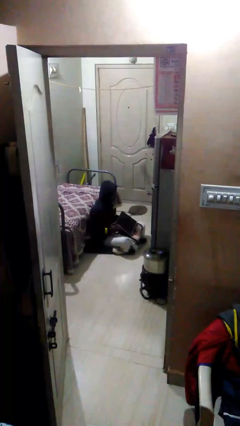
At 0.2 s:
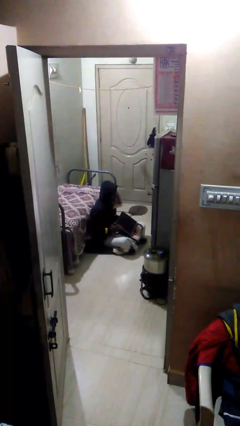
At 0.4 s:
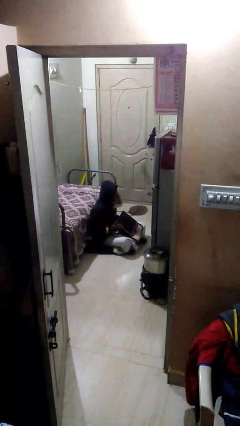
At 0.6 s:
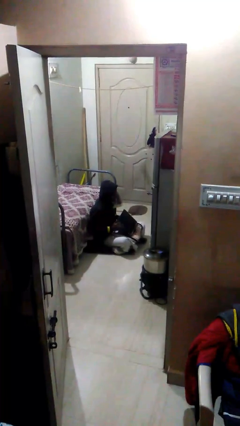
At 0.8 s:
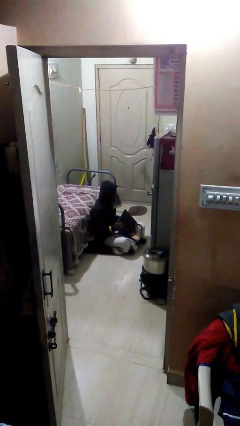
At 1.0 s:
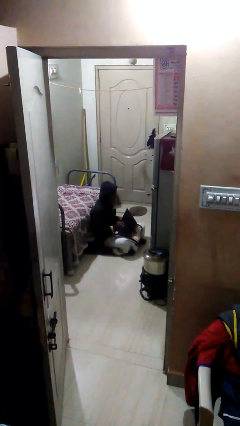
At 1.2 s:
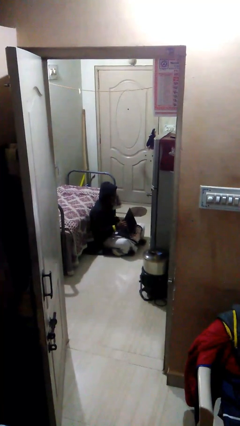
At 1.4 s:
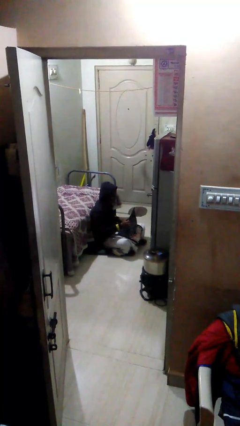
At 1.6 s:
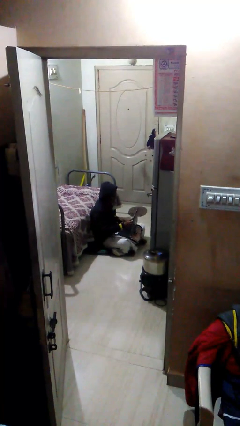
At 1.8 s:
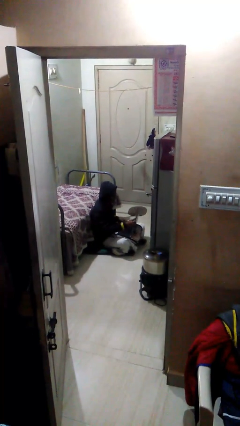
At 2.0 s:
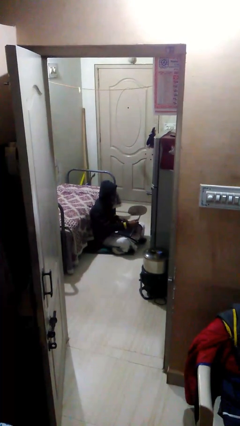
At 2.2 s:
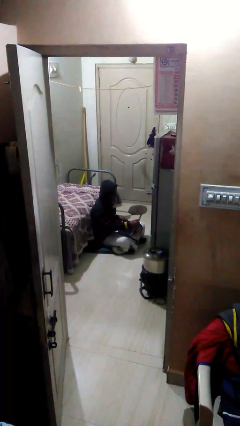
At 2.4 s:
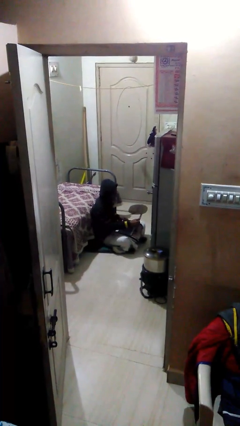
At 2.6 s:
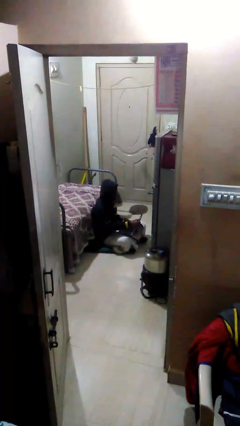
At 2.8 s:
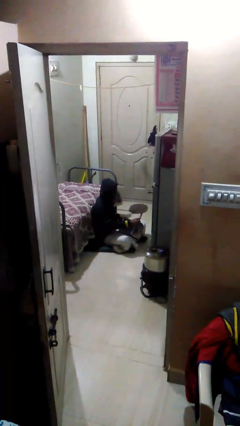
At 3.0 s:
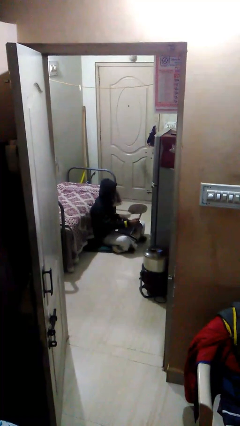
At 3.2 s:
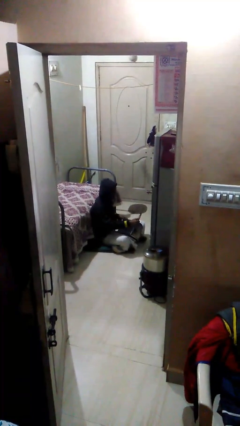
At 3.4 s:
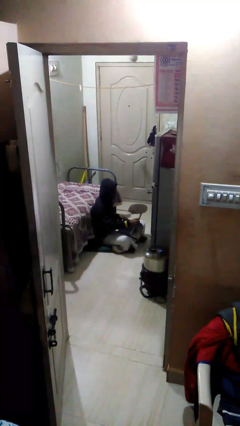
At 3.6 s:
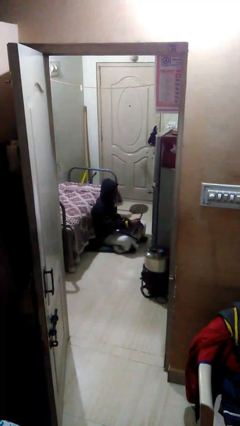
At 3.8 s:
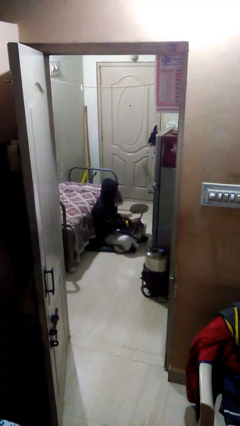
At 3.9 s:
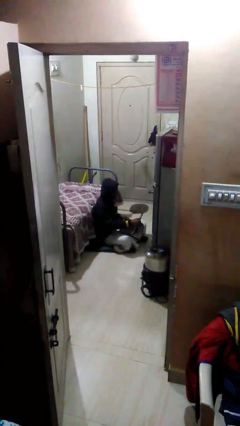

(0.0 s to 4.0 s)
person interacts with laptop

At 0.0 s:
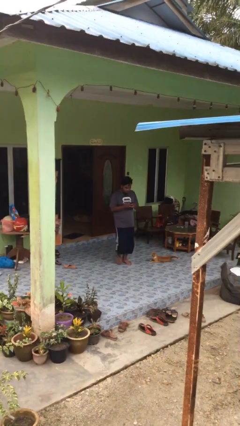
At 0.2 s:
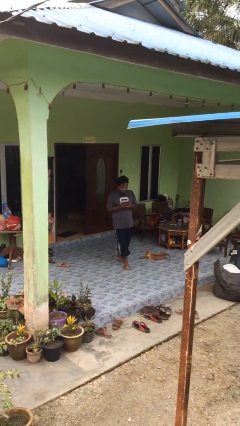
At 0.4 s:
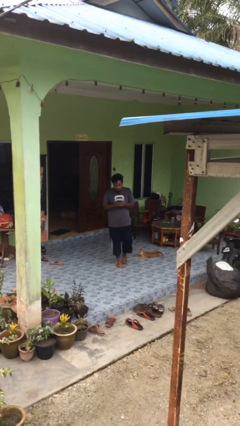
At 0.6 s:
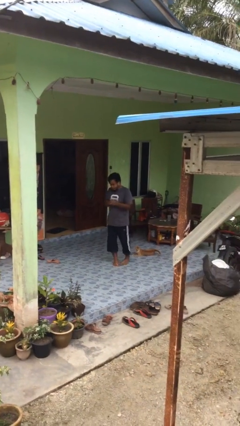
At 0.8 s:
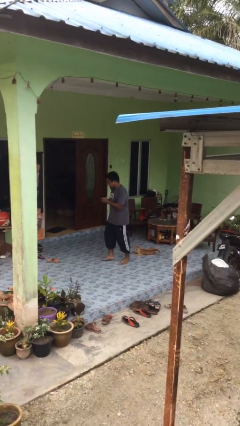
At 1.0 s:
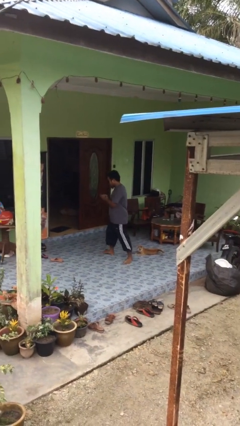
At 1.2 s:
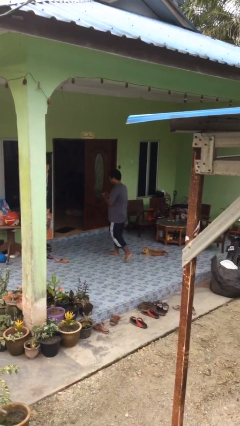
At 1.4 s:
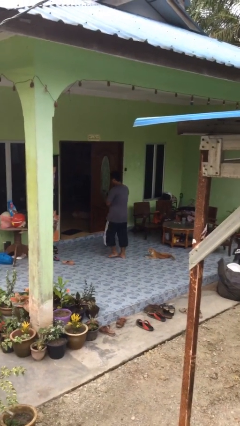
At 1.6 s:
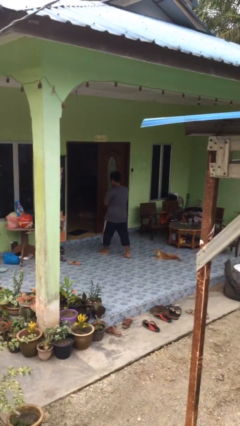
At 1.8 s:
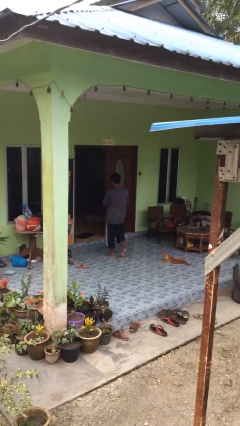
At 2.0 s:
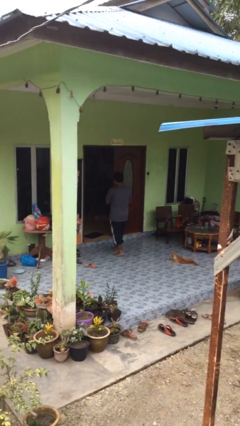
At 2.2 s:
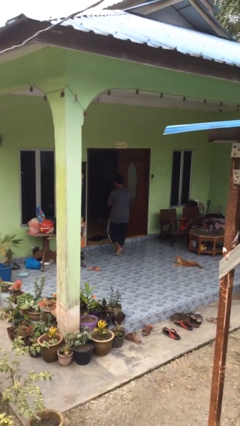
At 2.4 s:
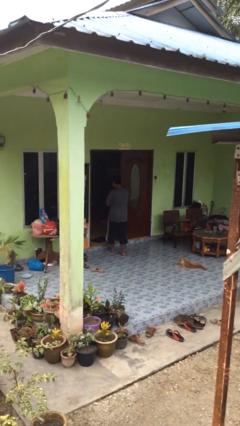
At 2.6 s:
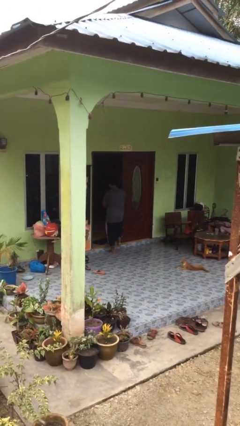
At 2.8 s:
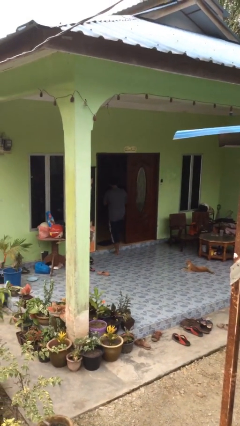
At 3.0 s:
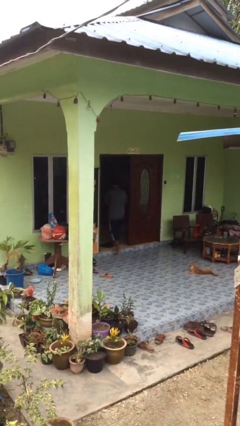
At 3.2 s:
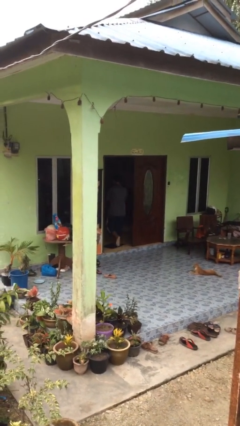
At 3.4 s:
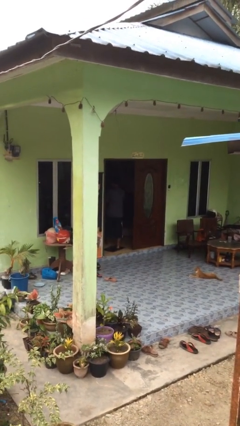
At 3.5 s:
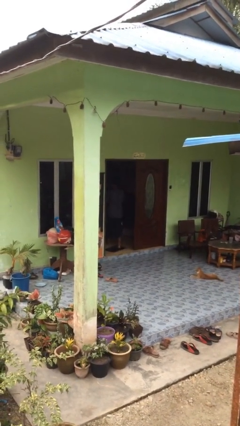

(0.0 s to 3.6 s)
person exits scene through structure

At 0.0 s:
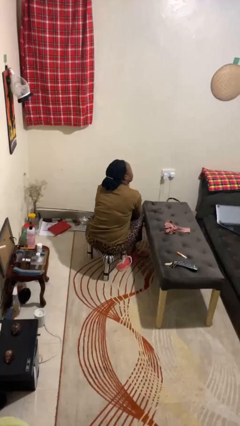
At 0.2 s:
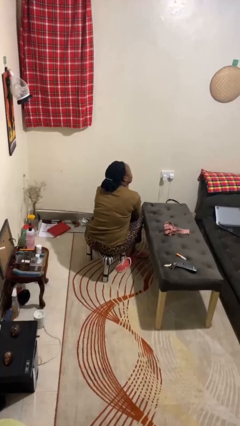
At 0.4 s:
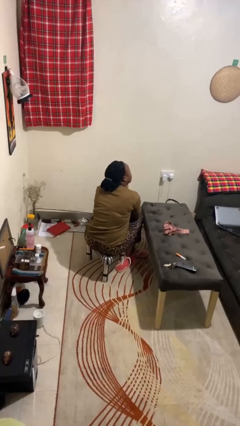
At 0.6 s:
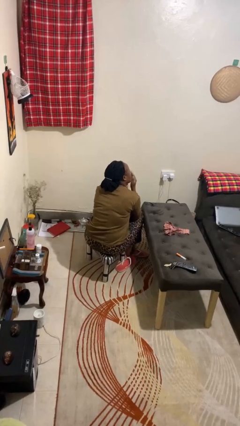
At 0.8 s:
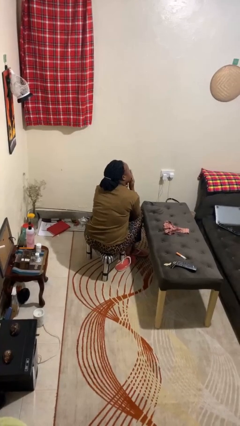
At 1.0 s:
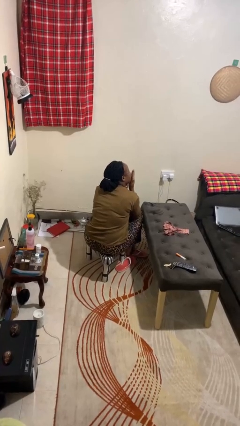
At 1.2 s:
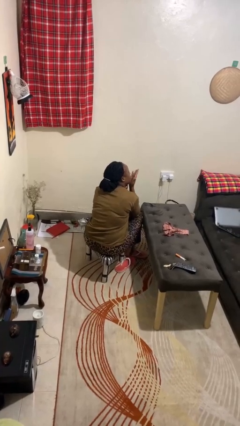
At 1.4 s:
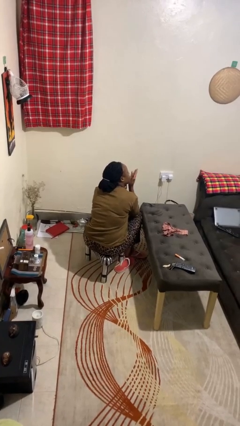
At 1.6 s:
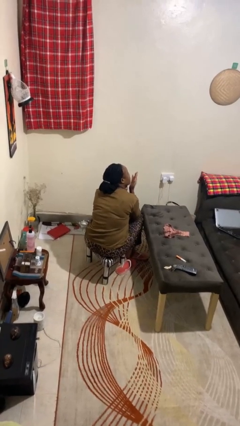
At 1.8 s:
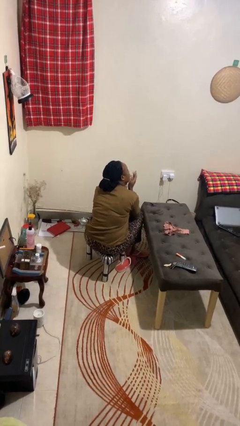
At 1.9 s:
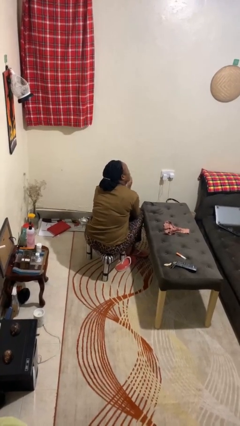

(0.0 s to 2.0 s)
person gestures blow kiss

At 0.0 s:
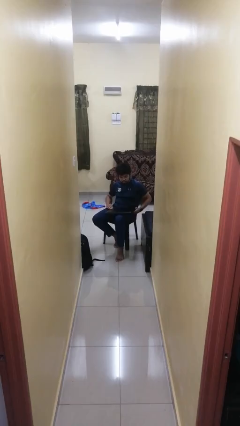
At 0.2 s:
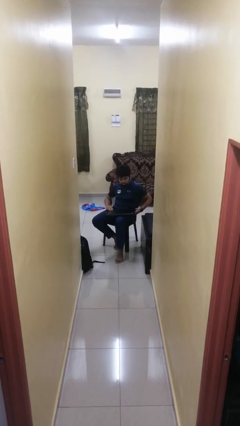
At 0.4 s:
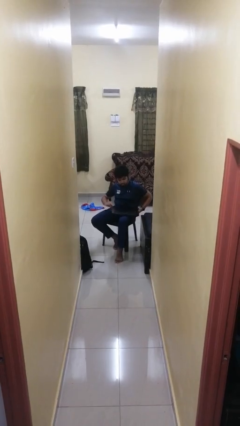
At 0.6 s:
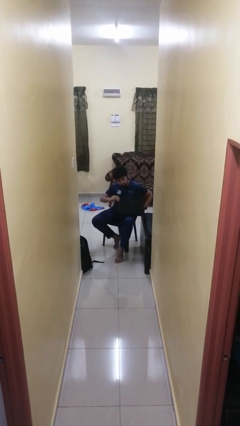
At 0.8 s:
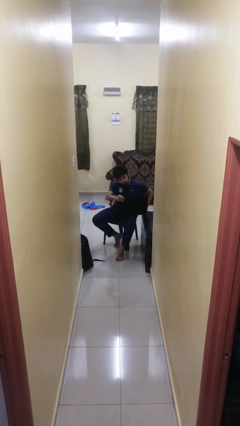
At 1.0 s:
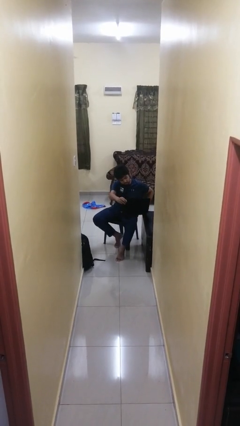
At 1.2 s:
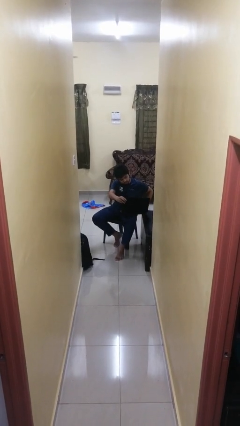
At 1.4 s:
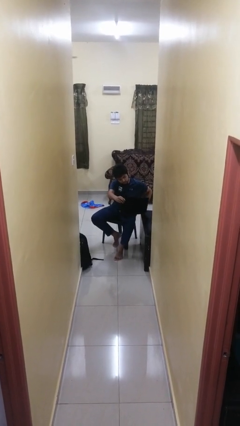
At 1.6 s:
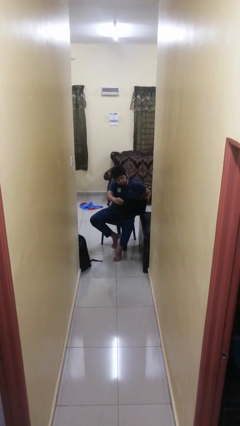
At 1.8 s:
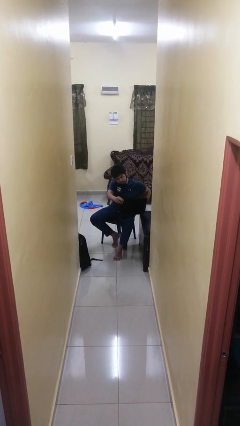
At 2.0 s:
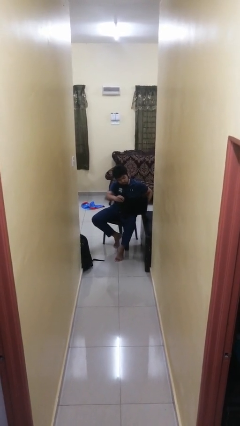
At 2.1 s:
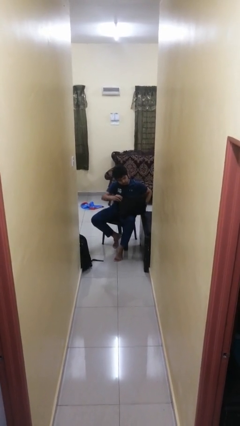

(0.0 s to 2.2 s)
person opens laptop

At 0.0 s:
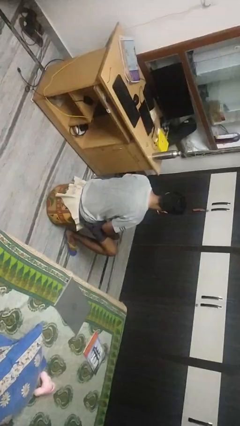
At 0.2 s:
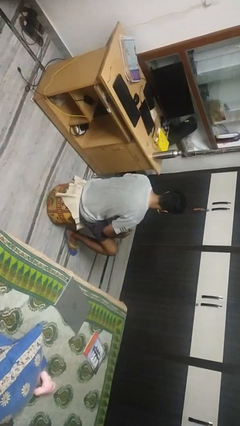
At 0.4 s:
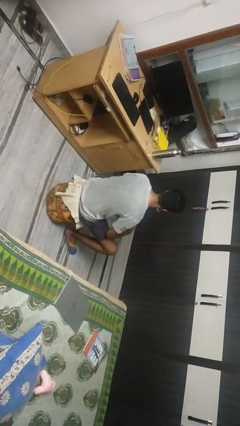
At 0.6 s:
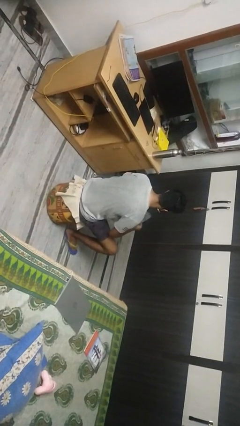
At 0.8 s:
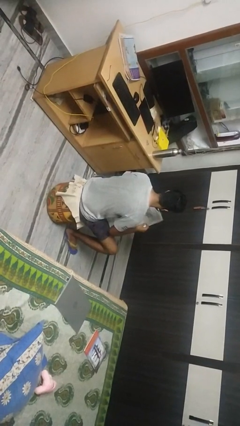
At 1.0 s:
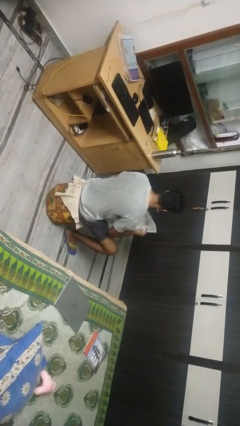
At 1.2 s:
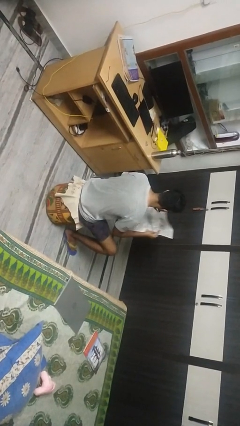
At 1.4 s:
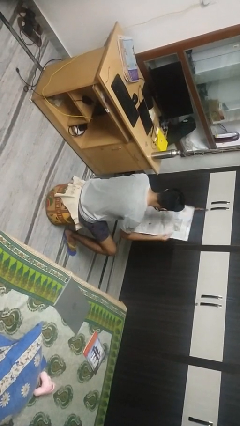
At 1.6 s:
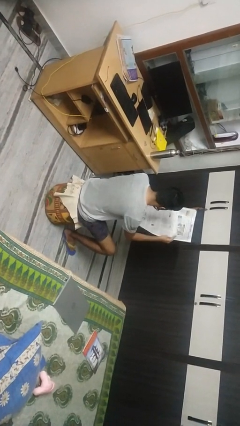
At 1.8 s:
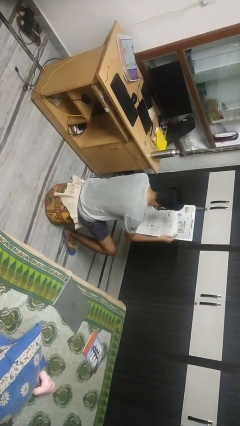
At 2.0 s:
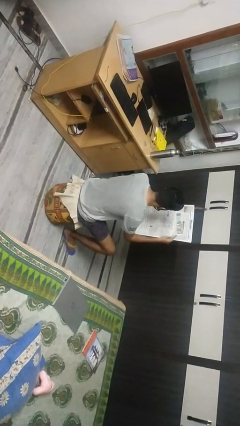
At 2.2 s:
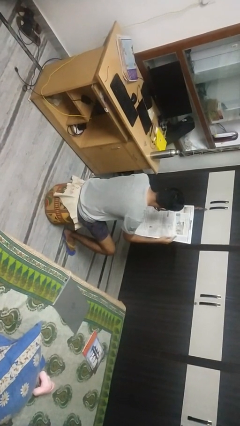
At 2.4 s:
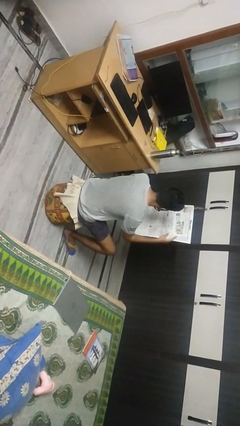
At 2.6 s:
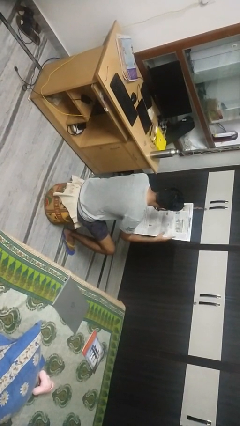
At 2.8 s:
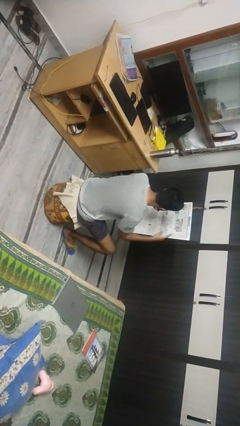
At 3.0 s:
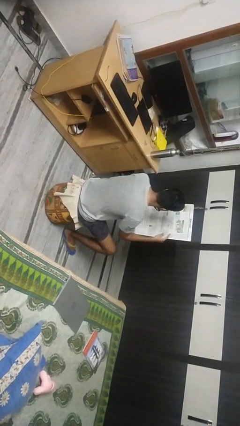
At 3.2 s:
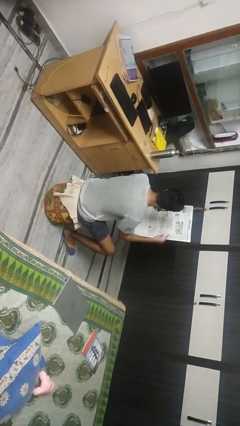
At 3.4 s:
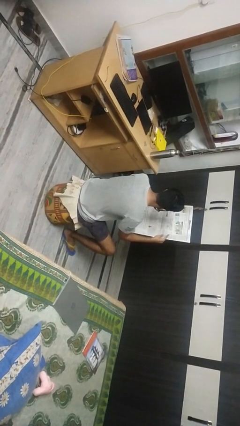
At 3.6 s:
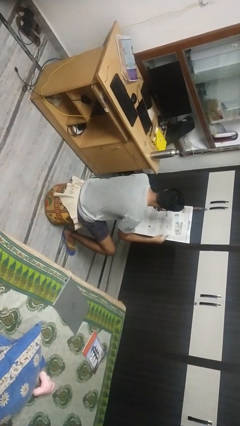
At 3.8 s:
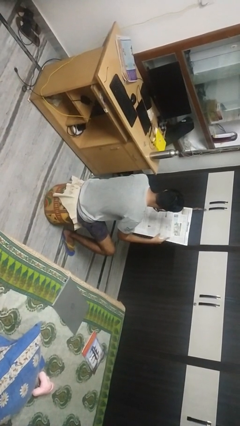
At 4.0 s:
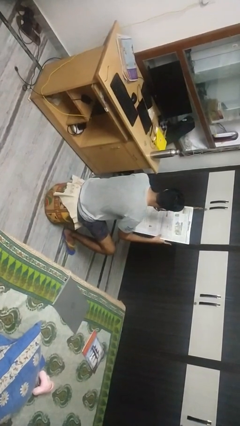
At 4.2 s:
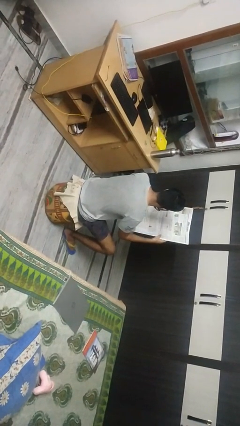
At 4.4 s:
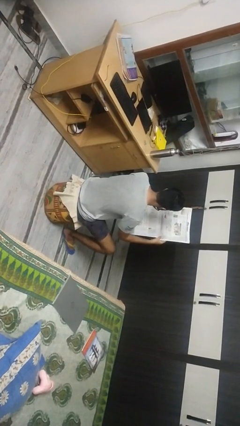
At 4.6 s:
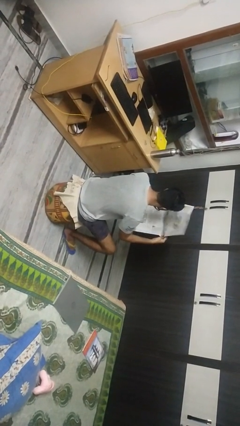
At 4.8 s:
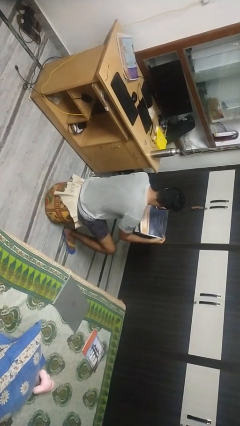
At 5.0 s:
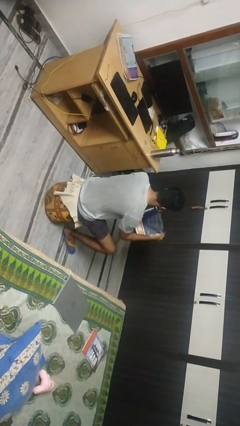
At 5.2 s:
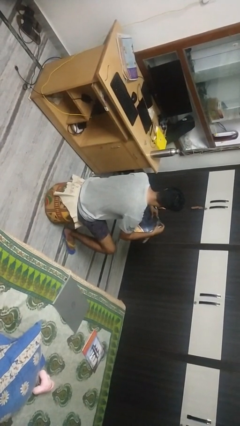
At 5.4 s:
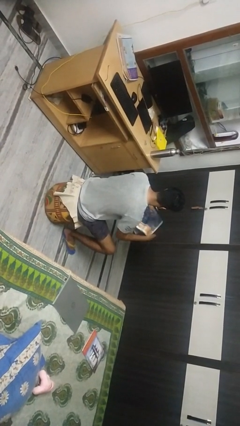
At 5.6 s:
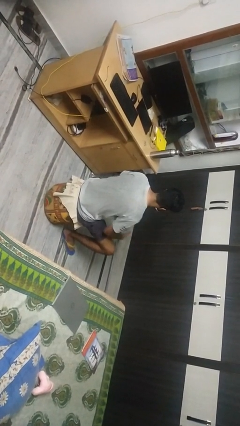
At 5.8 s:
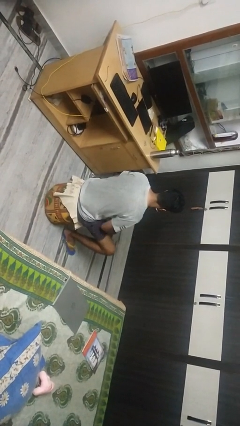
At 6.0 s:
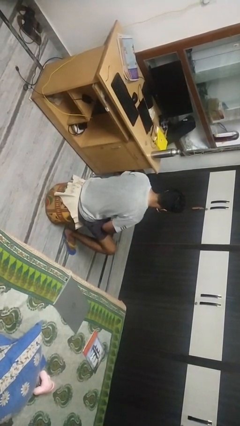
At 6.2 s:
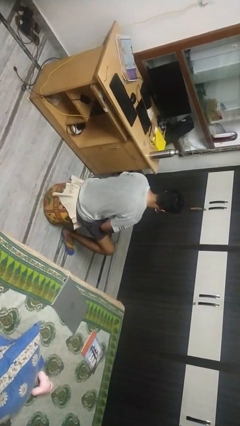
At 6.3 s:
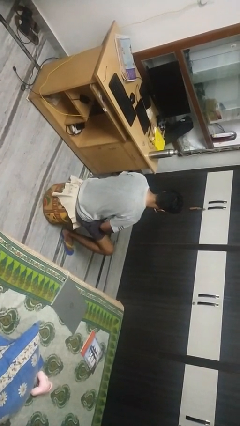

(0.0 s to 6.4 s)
person reads newspaper
